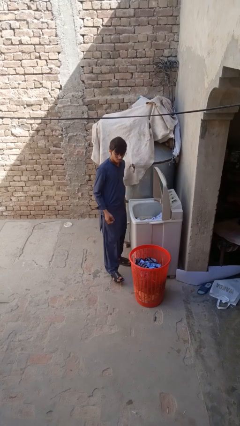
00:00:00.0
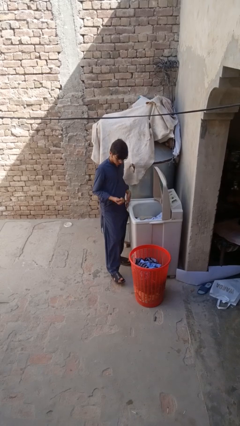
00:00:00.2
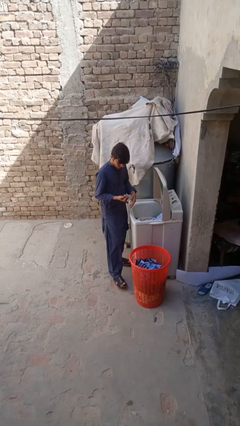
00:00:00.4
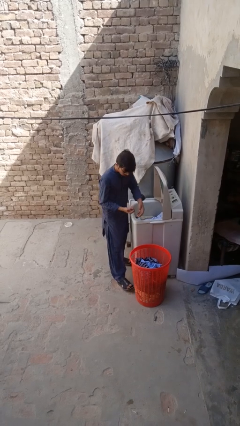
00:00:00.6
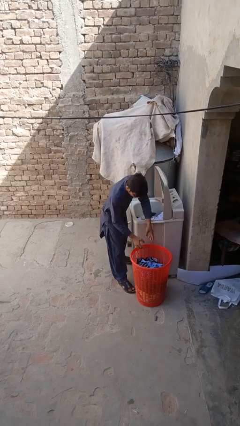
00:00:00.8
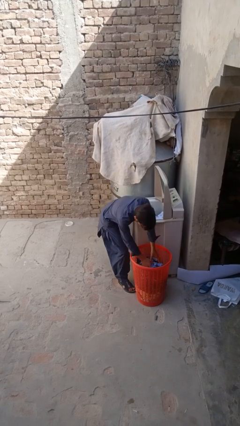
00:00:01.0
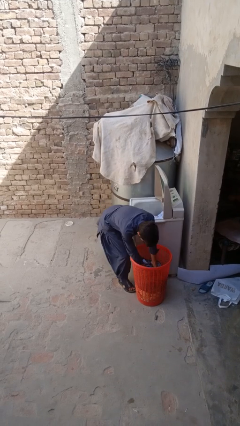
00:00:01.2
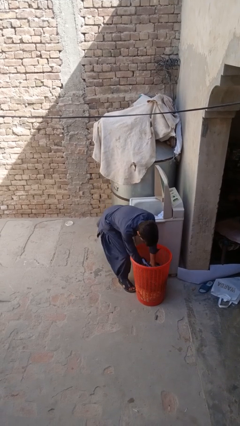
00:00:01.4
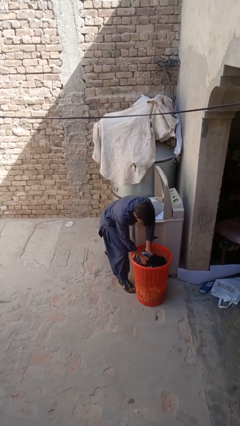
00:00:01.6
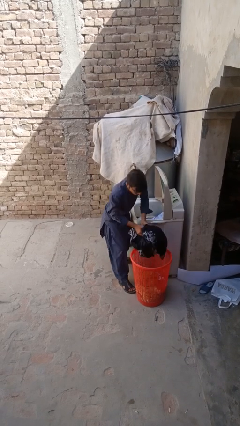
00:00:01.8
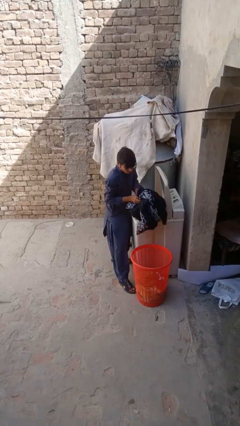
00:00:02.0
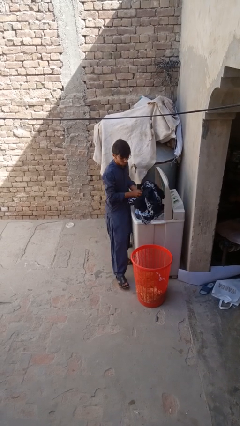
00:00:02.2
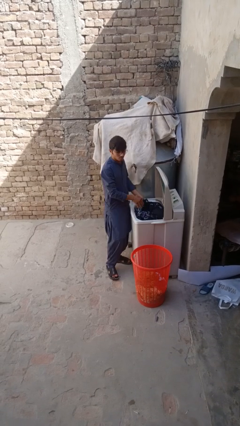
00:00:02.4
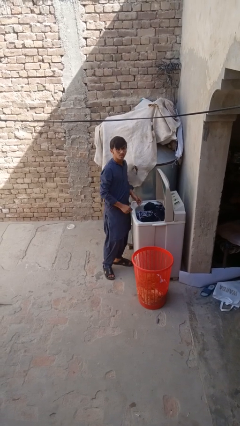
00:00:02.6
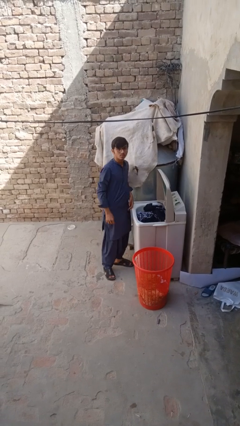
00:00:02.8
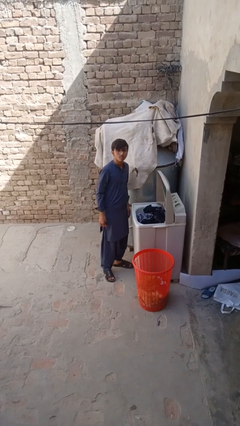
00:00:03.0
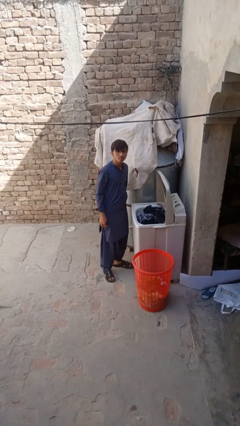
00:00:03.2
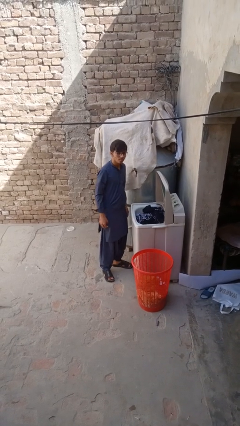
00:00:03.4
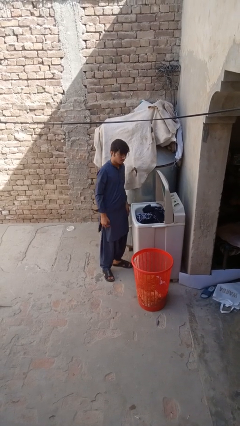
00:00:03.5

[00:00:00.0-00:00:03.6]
person loads clotheswasher

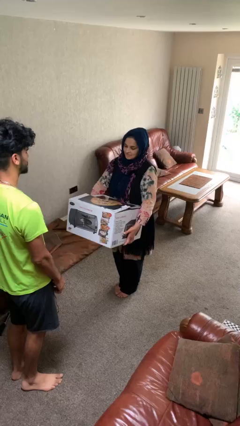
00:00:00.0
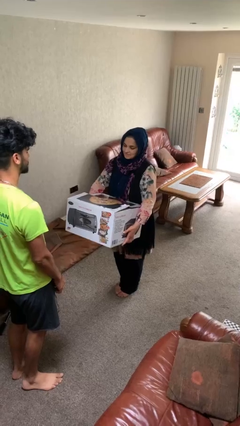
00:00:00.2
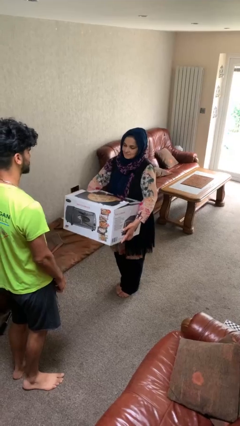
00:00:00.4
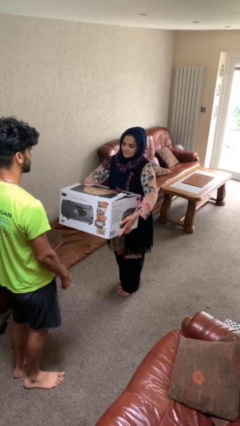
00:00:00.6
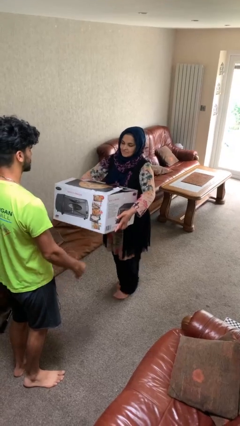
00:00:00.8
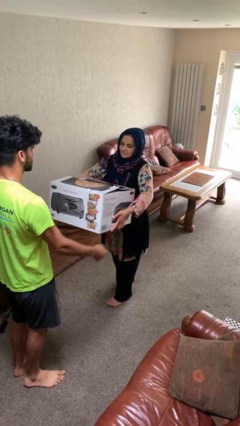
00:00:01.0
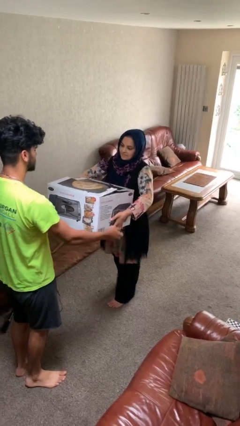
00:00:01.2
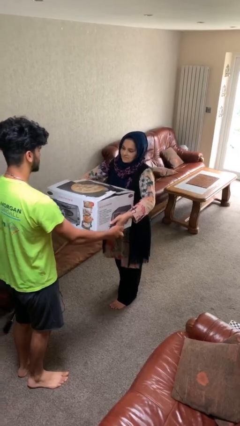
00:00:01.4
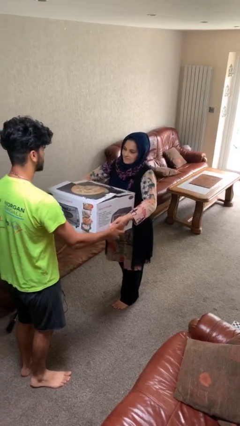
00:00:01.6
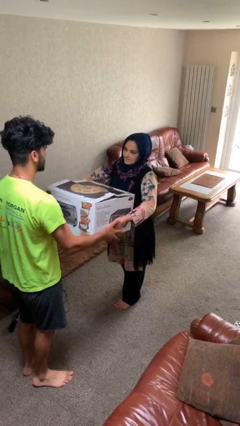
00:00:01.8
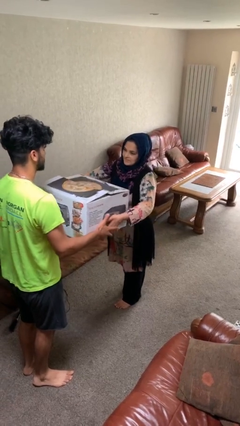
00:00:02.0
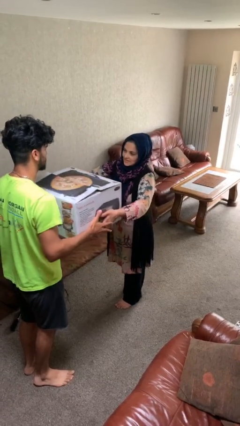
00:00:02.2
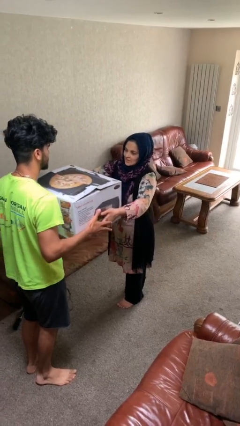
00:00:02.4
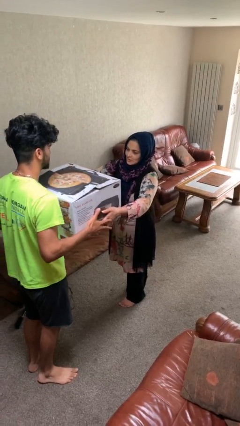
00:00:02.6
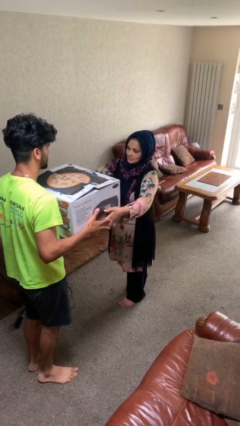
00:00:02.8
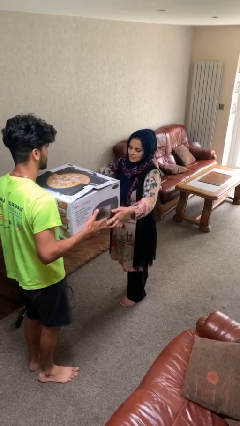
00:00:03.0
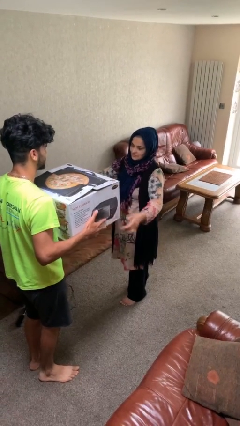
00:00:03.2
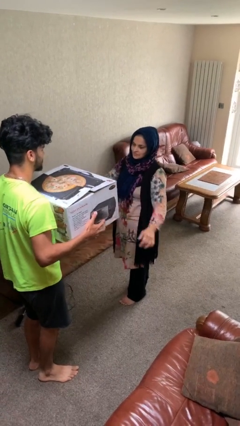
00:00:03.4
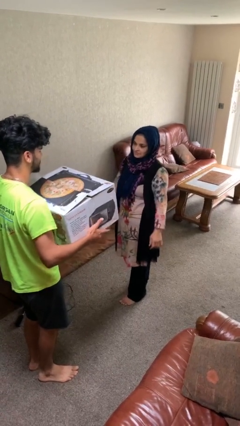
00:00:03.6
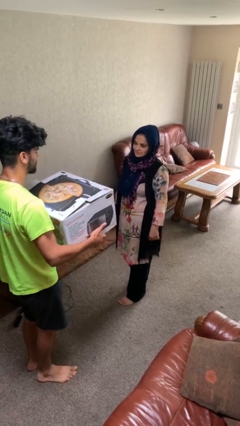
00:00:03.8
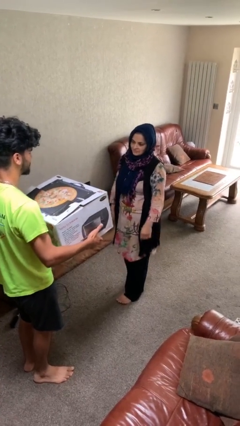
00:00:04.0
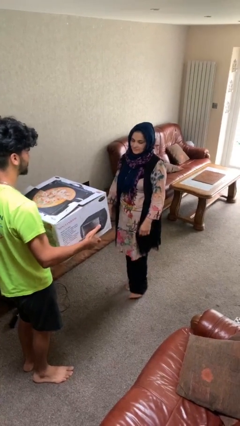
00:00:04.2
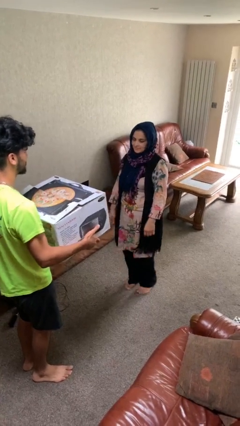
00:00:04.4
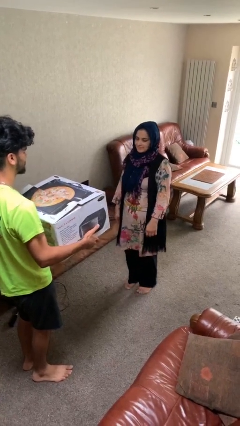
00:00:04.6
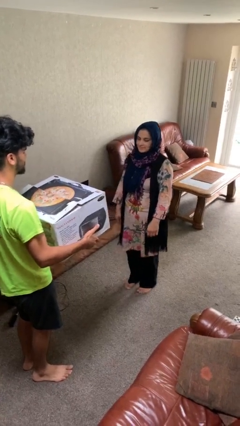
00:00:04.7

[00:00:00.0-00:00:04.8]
person transfers object to person

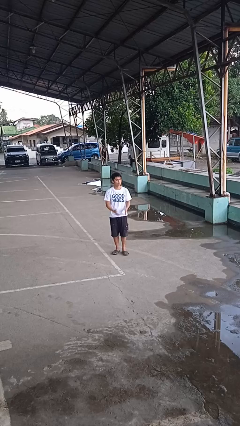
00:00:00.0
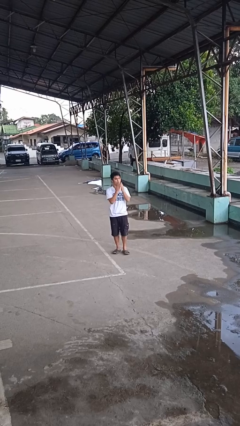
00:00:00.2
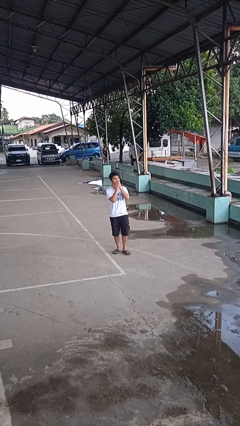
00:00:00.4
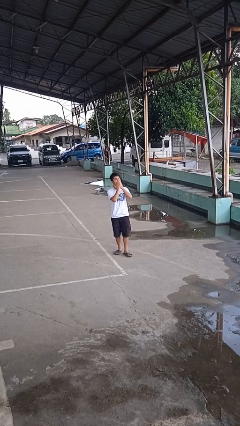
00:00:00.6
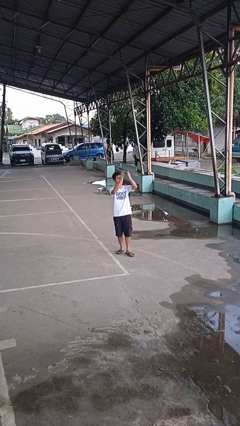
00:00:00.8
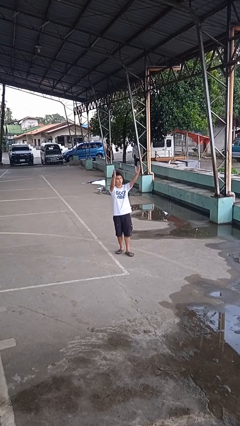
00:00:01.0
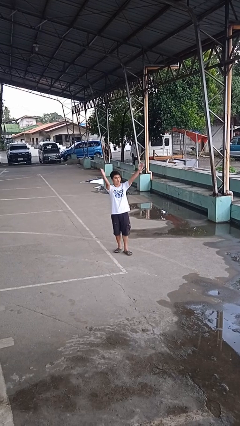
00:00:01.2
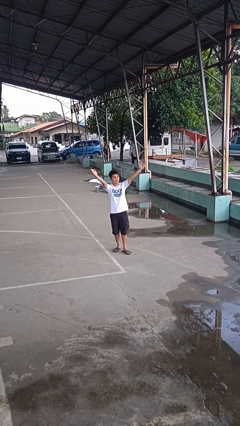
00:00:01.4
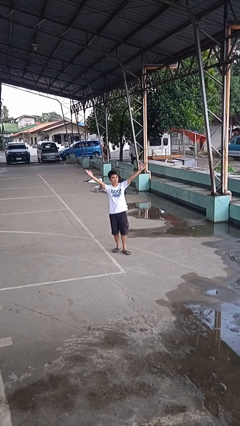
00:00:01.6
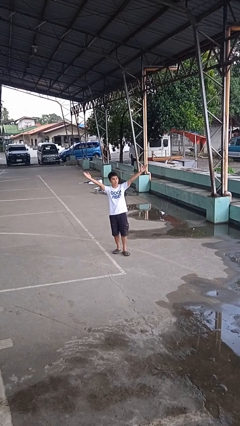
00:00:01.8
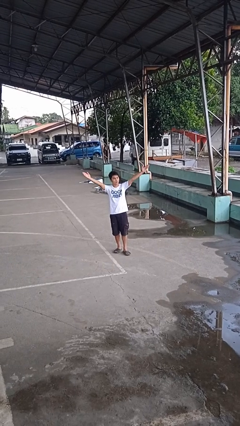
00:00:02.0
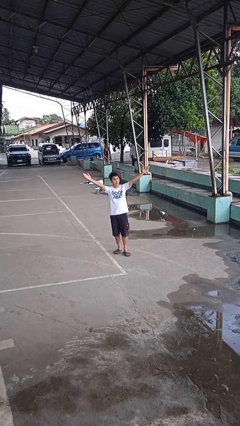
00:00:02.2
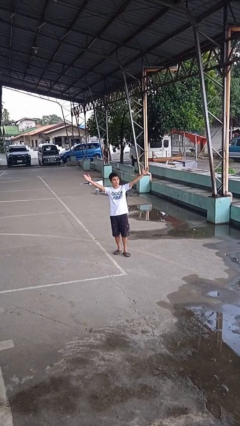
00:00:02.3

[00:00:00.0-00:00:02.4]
person gestures blow kiss

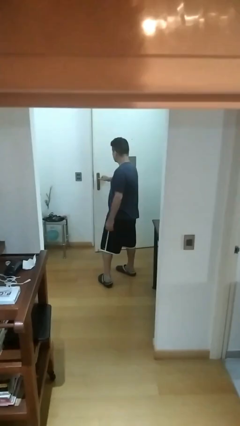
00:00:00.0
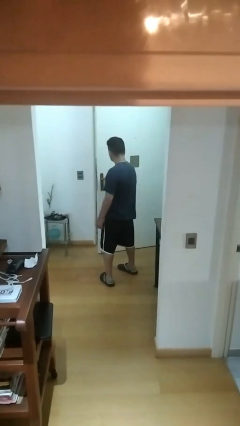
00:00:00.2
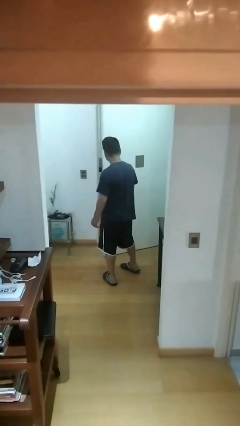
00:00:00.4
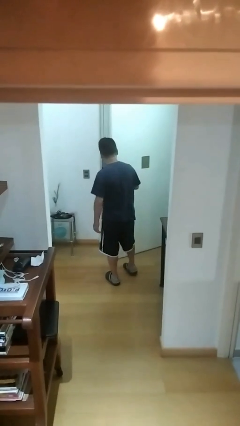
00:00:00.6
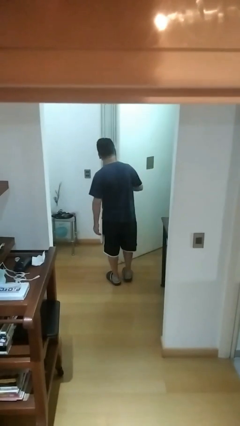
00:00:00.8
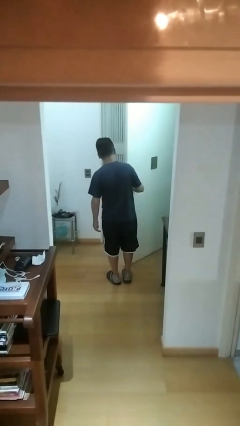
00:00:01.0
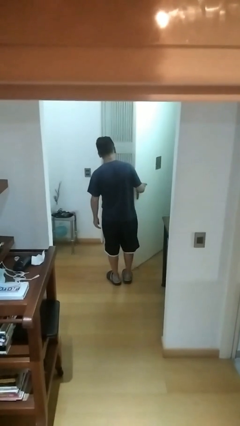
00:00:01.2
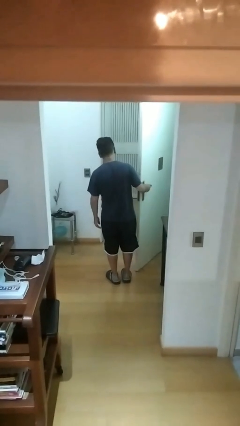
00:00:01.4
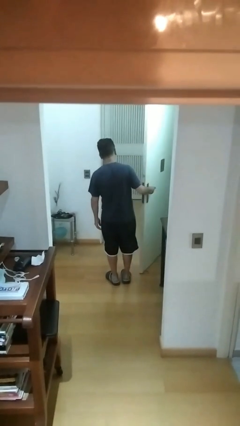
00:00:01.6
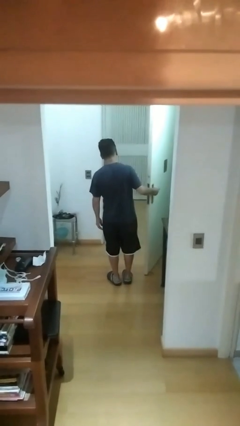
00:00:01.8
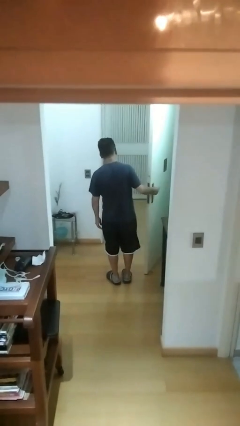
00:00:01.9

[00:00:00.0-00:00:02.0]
person opens facility door

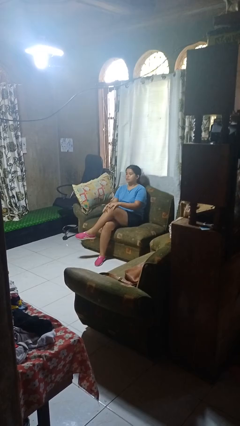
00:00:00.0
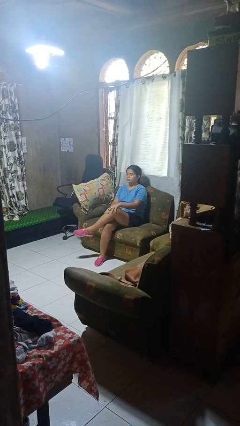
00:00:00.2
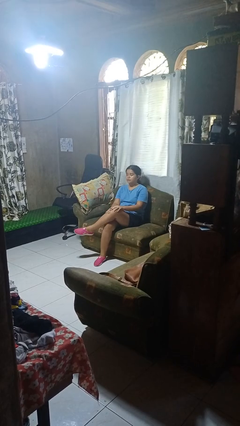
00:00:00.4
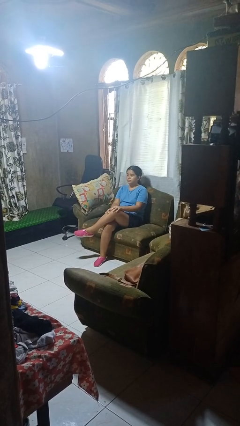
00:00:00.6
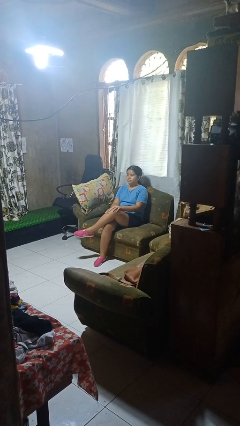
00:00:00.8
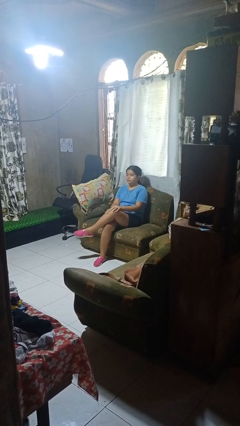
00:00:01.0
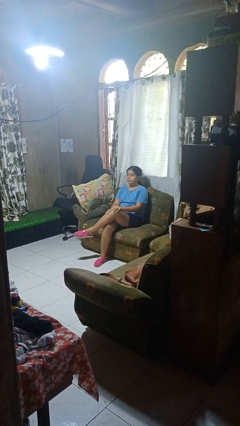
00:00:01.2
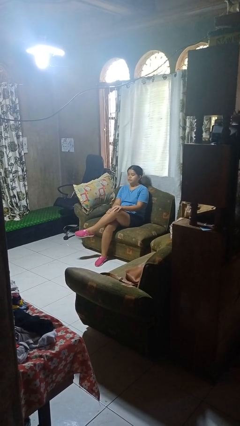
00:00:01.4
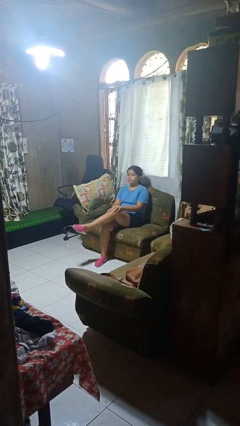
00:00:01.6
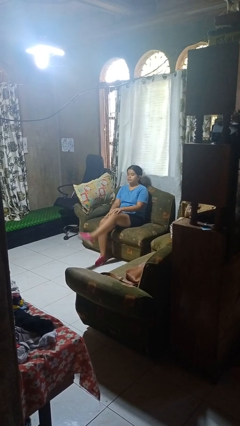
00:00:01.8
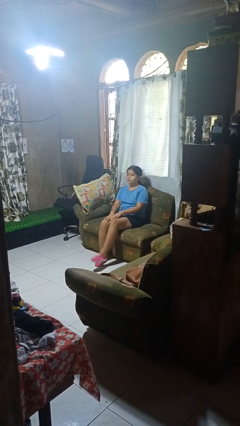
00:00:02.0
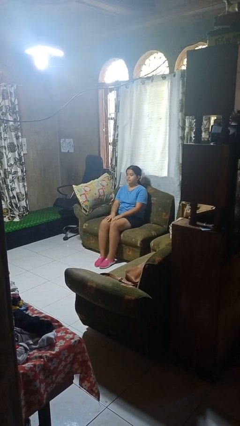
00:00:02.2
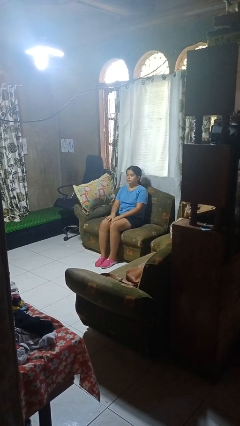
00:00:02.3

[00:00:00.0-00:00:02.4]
person crosses legs

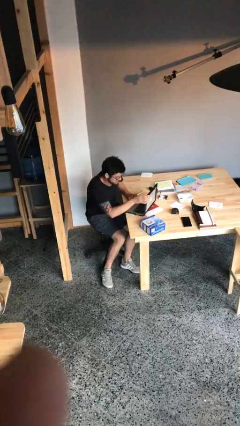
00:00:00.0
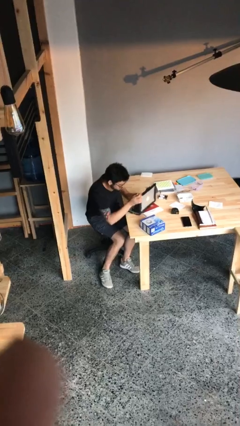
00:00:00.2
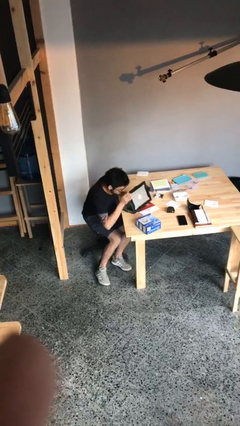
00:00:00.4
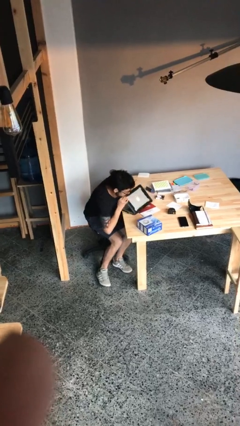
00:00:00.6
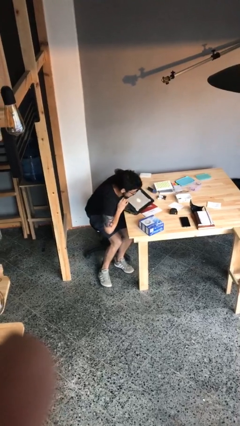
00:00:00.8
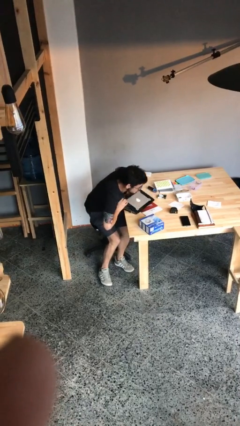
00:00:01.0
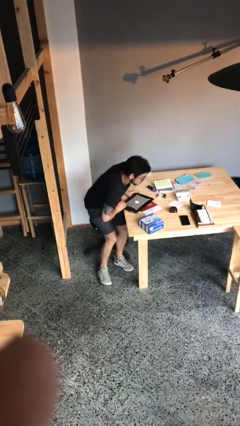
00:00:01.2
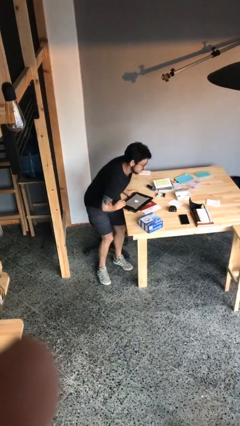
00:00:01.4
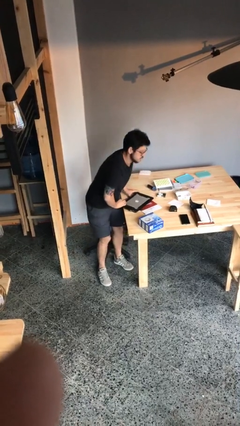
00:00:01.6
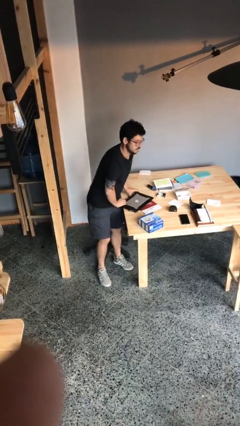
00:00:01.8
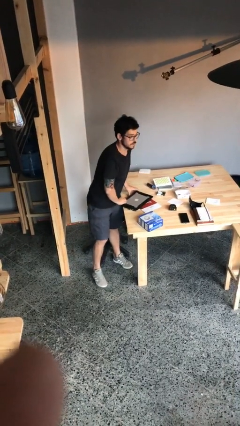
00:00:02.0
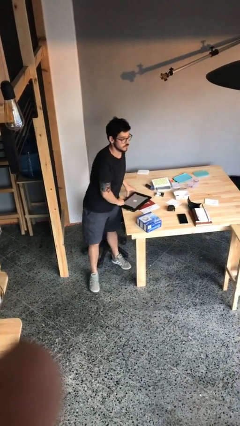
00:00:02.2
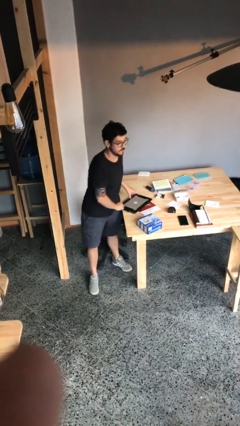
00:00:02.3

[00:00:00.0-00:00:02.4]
person stands up

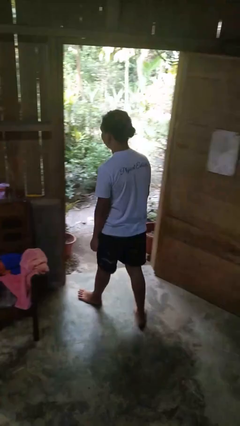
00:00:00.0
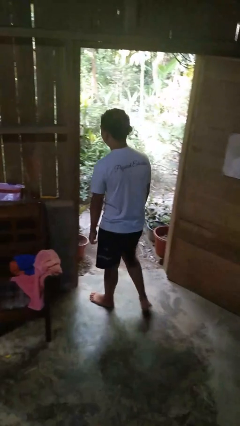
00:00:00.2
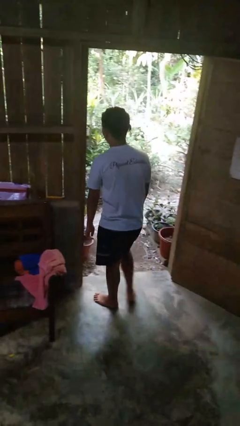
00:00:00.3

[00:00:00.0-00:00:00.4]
person bumps into wall
